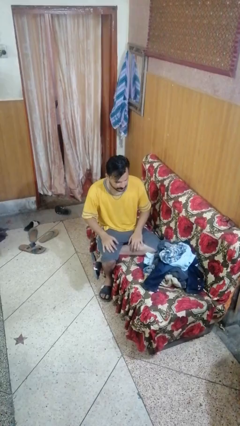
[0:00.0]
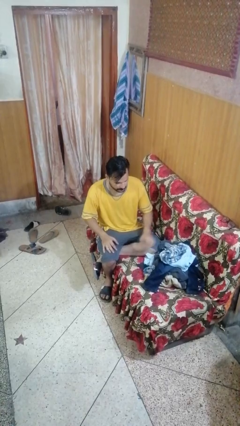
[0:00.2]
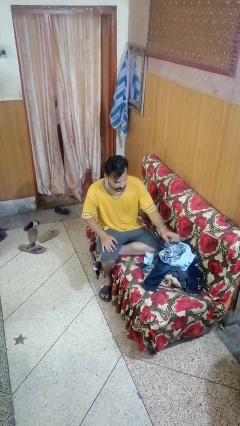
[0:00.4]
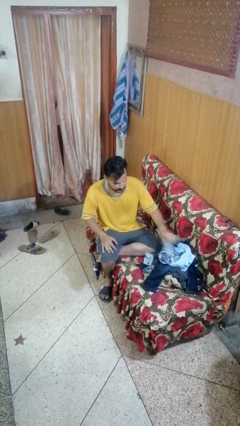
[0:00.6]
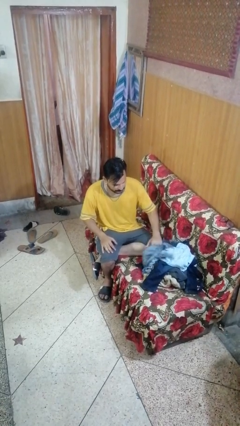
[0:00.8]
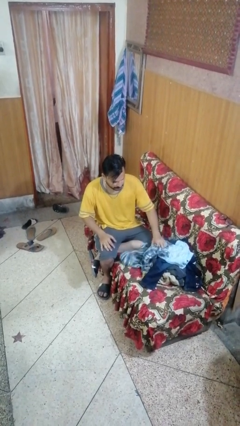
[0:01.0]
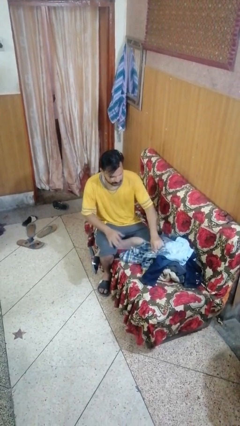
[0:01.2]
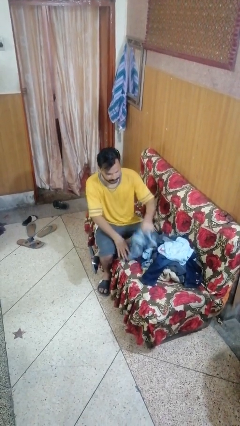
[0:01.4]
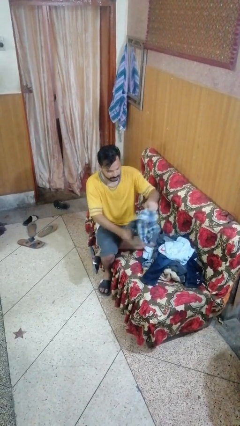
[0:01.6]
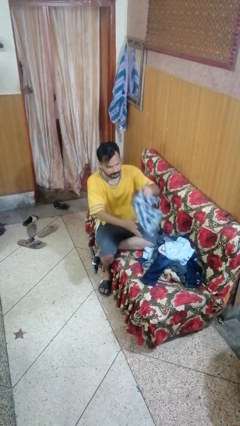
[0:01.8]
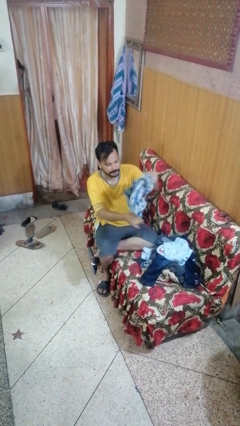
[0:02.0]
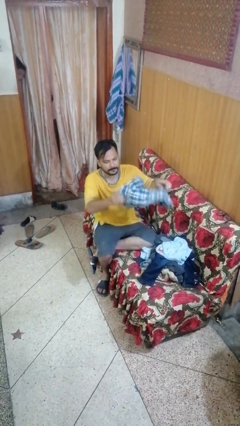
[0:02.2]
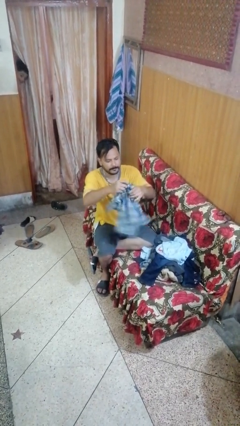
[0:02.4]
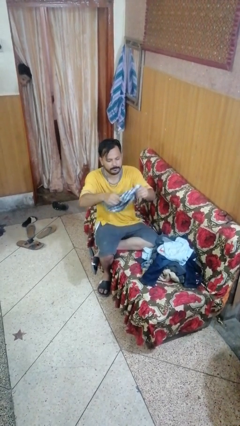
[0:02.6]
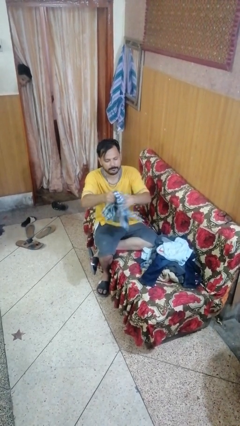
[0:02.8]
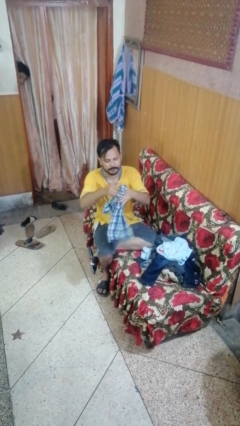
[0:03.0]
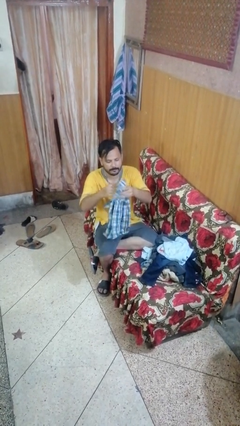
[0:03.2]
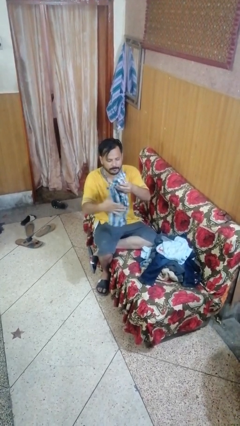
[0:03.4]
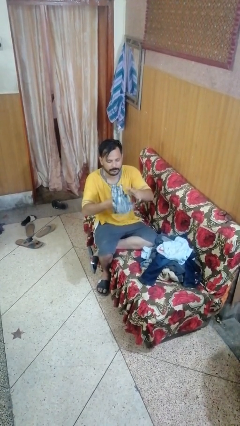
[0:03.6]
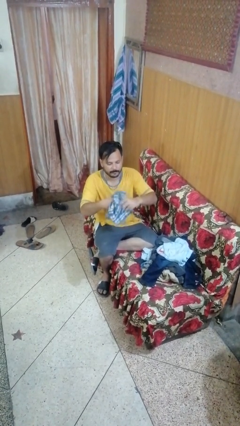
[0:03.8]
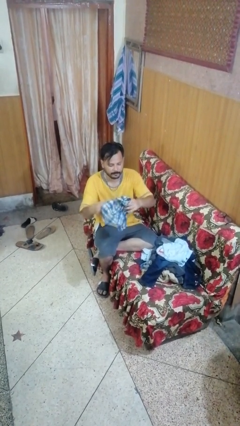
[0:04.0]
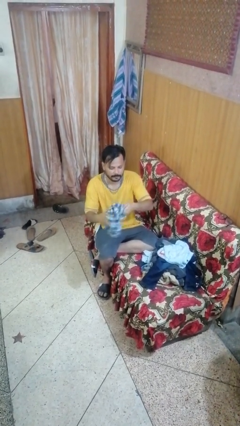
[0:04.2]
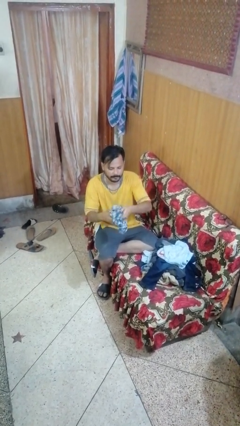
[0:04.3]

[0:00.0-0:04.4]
person folds shirt

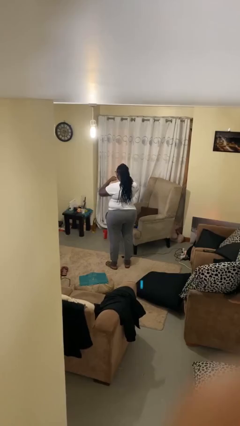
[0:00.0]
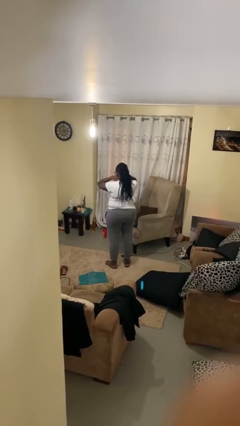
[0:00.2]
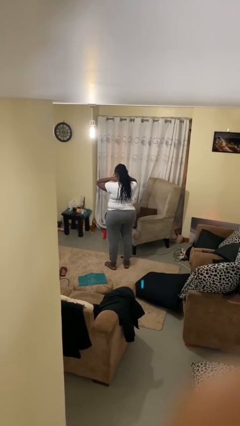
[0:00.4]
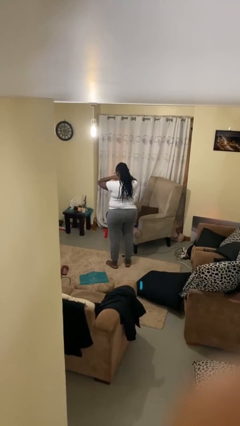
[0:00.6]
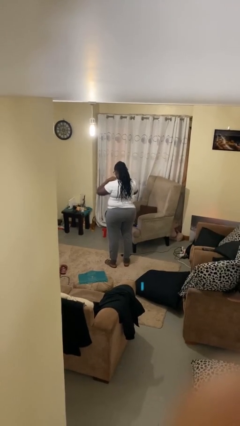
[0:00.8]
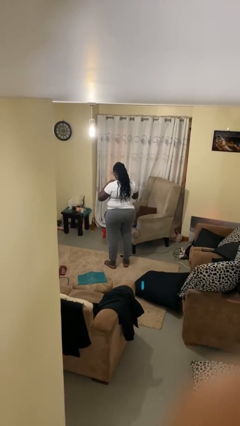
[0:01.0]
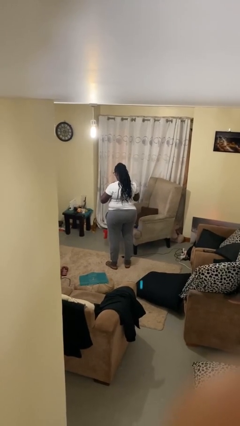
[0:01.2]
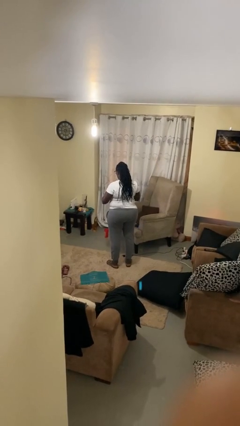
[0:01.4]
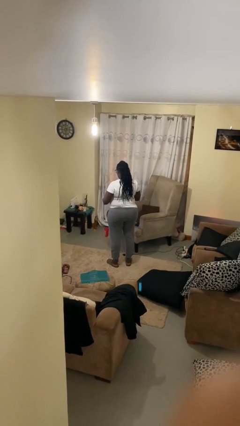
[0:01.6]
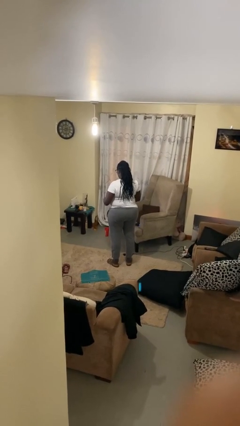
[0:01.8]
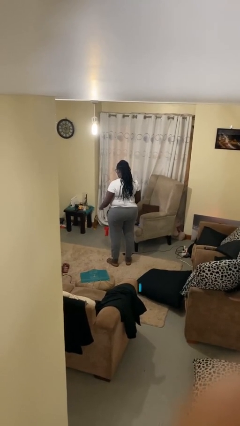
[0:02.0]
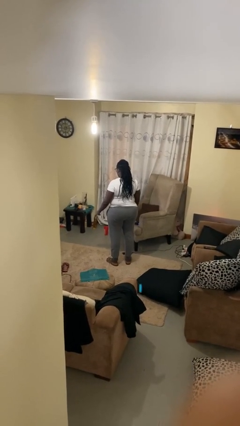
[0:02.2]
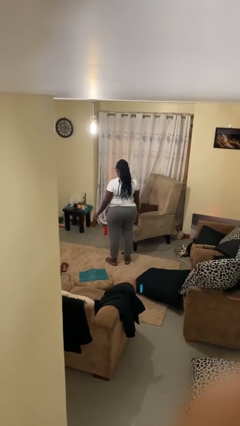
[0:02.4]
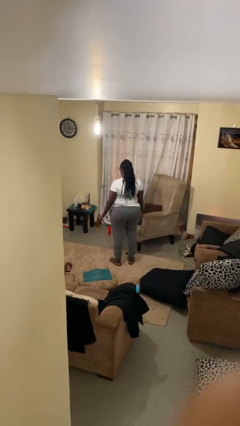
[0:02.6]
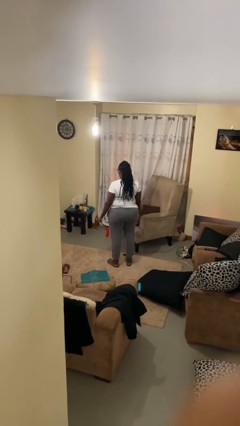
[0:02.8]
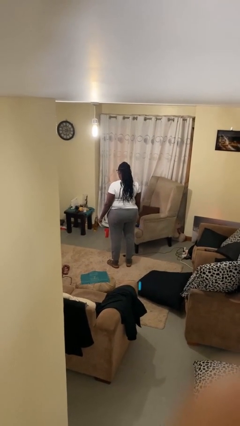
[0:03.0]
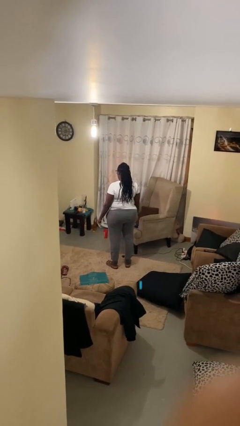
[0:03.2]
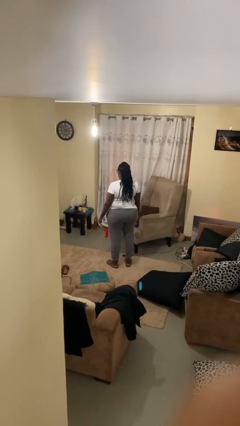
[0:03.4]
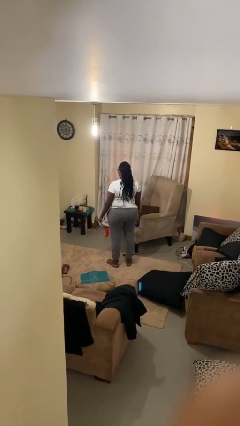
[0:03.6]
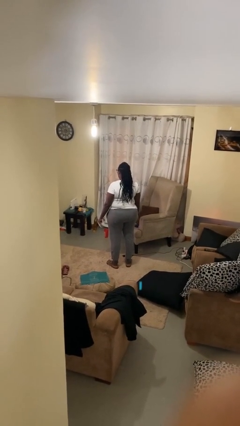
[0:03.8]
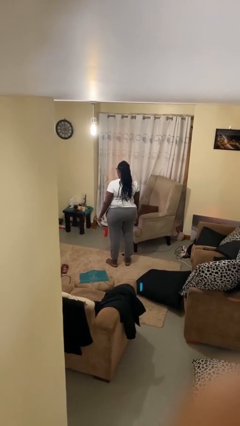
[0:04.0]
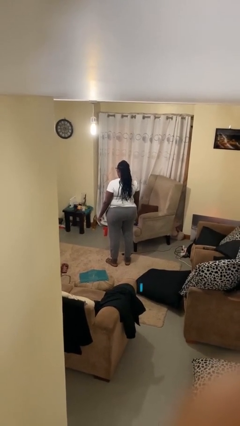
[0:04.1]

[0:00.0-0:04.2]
person takes off necklace

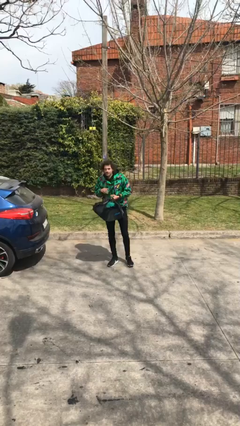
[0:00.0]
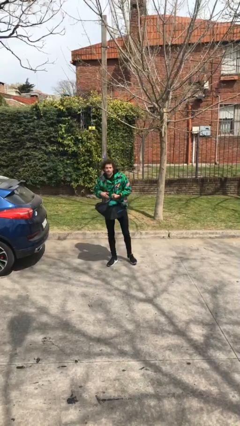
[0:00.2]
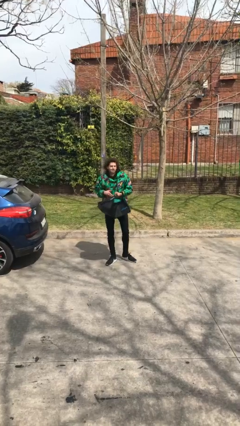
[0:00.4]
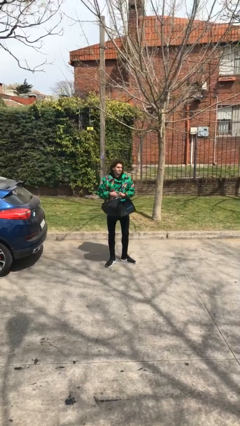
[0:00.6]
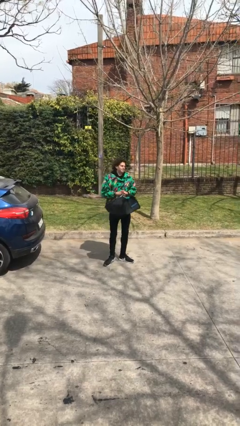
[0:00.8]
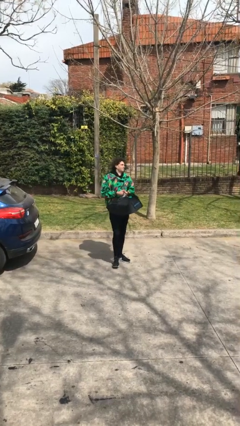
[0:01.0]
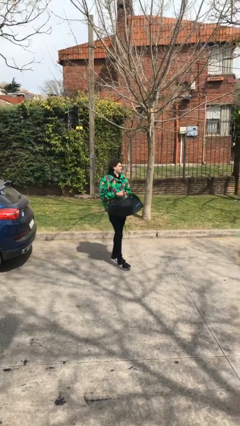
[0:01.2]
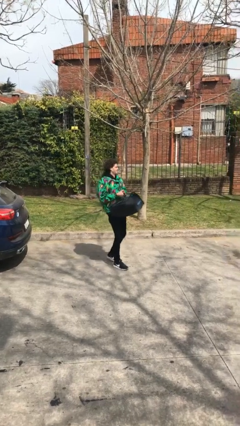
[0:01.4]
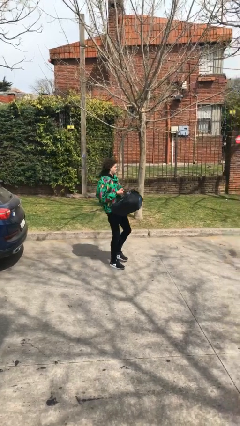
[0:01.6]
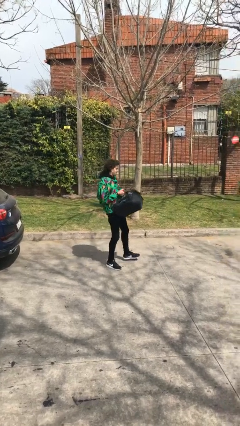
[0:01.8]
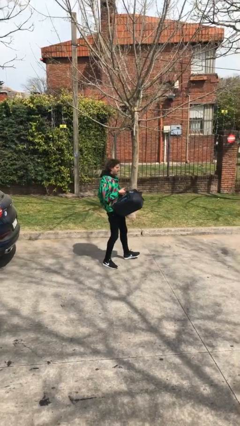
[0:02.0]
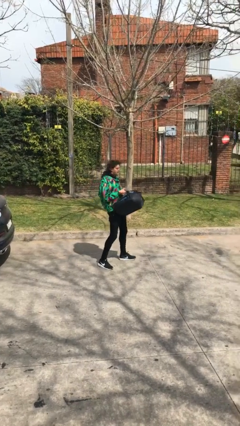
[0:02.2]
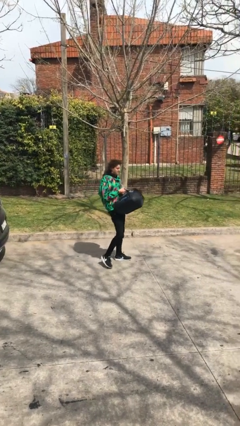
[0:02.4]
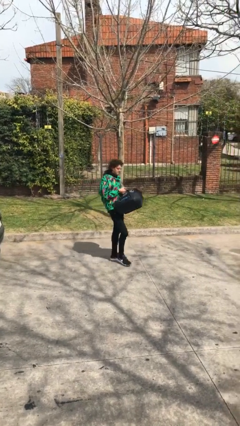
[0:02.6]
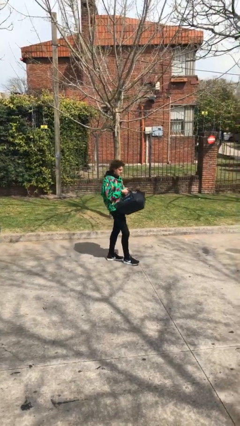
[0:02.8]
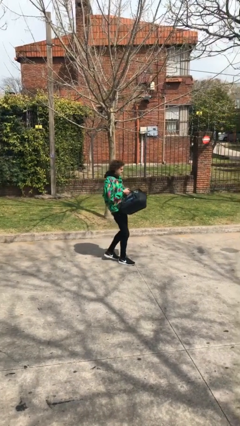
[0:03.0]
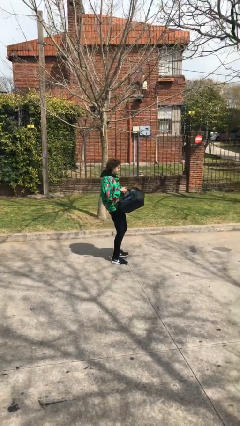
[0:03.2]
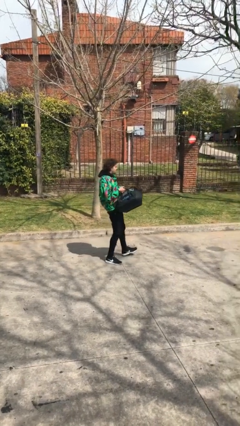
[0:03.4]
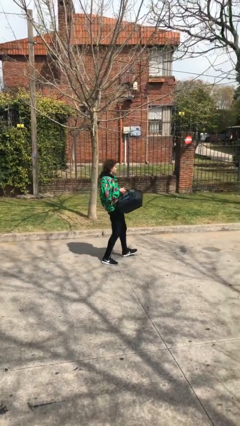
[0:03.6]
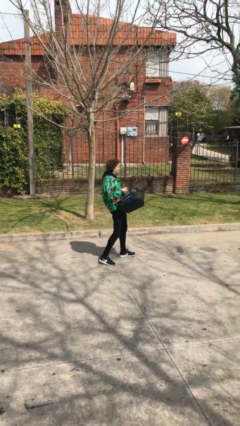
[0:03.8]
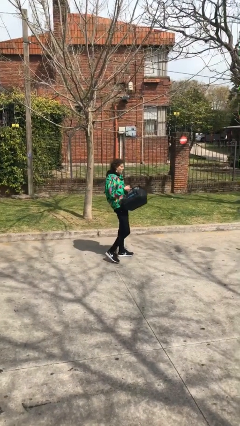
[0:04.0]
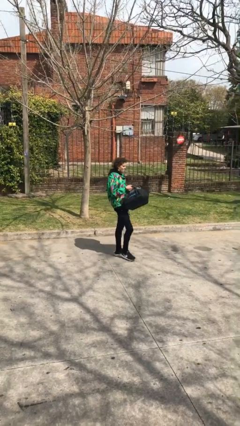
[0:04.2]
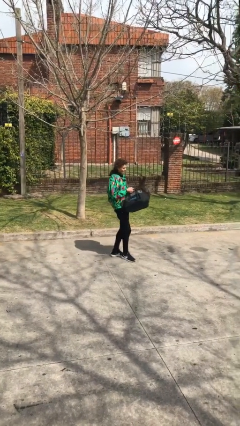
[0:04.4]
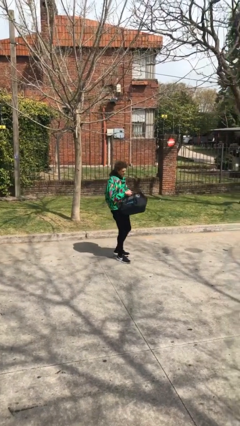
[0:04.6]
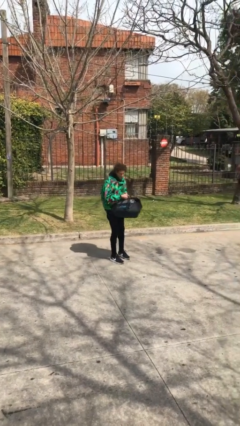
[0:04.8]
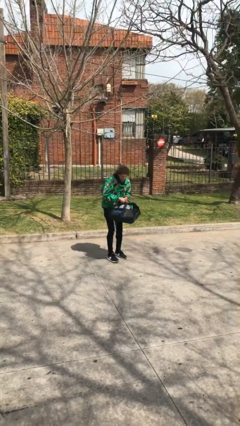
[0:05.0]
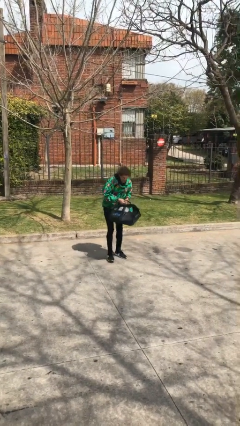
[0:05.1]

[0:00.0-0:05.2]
person carries heavy object

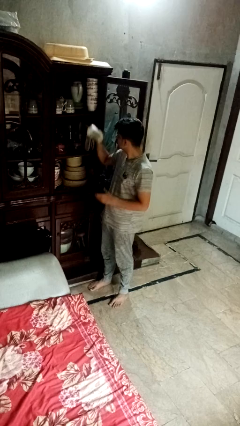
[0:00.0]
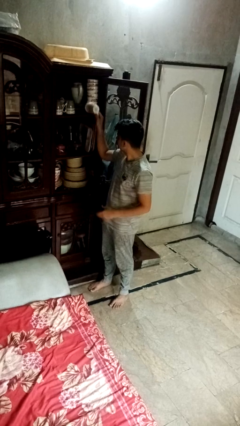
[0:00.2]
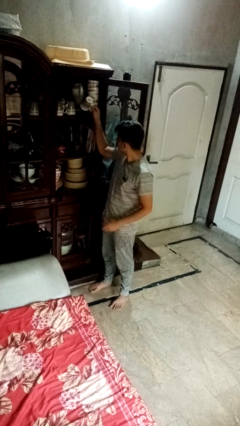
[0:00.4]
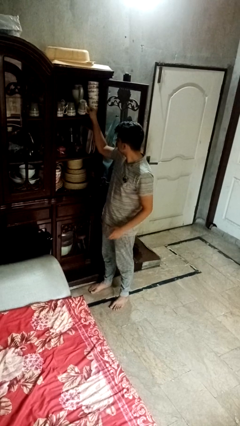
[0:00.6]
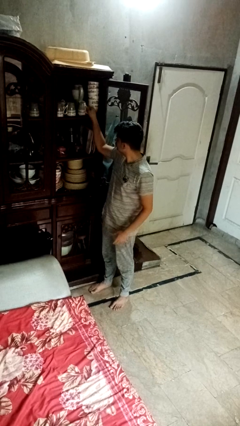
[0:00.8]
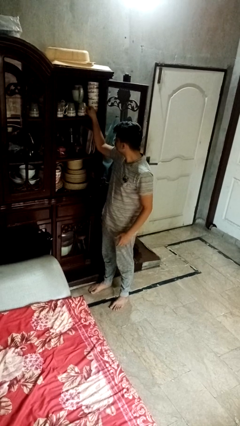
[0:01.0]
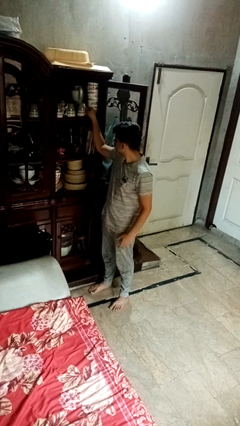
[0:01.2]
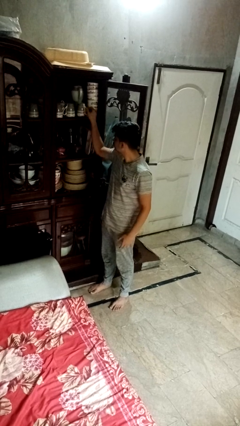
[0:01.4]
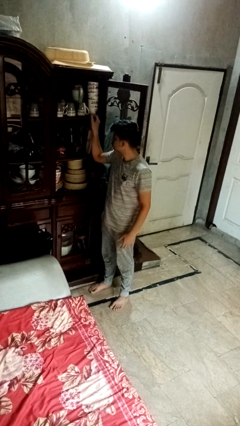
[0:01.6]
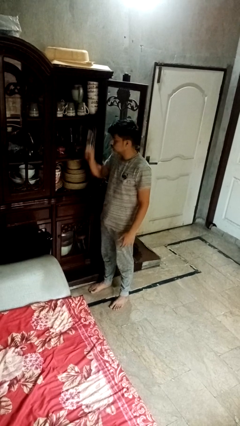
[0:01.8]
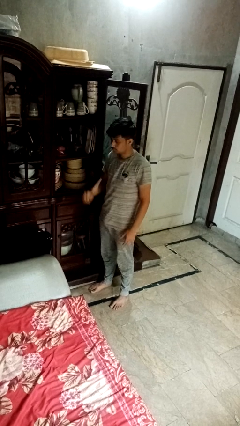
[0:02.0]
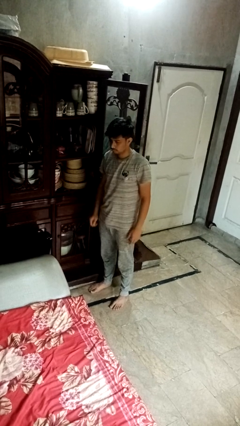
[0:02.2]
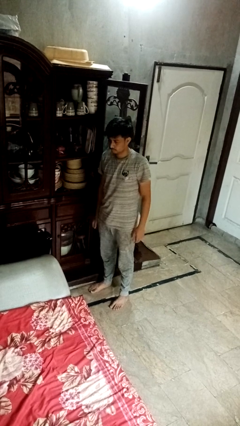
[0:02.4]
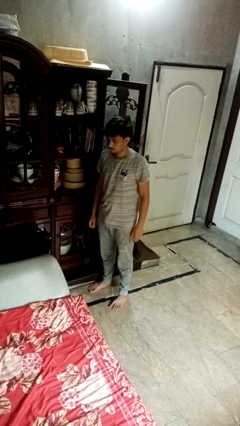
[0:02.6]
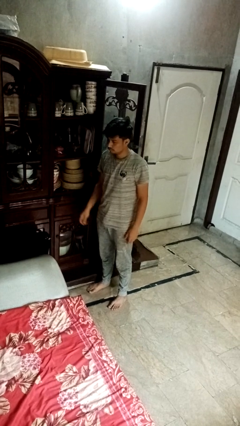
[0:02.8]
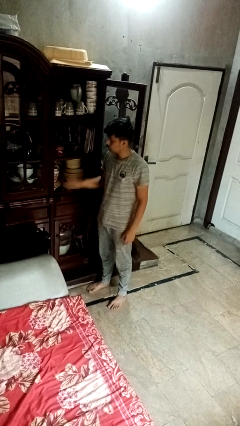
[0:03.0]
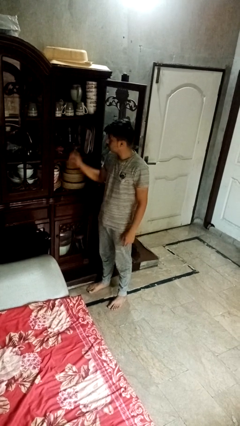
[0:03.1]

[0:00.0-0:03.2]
person puts object in cabinet

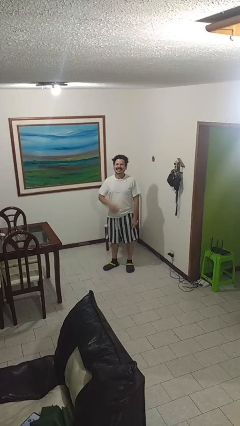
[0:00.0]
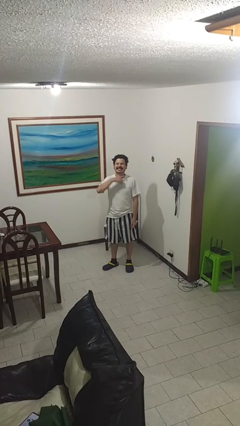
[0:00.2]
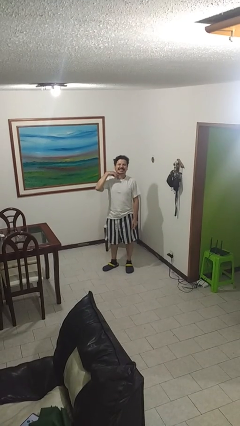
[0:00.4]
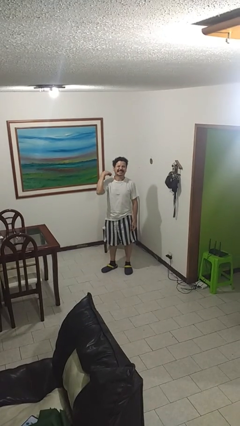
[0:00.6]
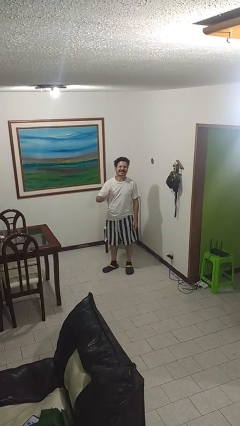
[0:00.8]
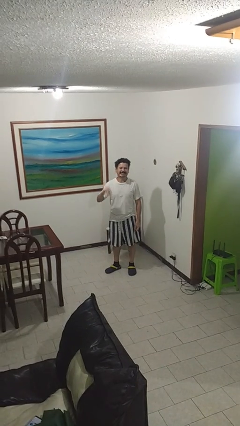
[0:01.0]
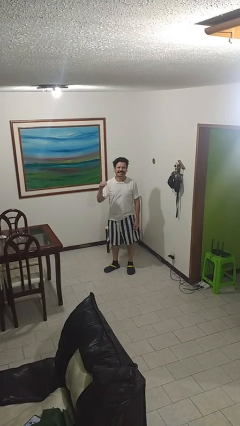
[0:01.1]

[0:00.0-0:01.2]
person gestures cut
